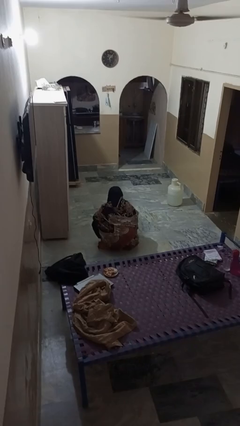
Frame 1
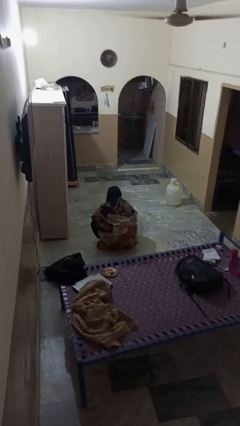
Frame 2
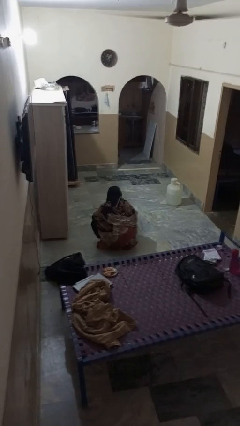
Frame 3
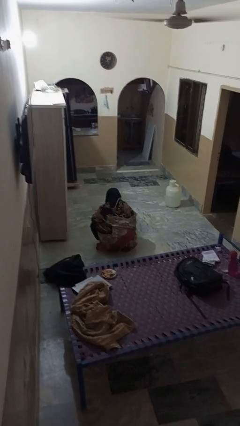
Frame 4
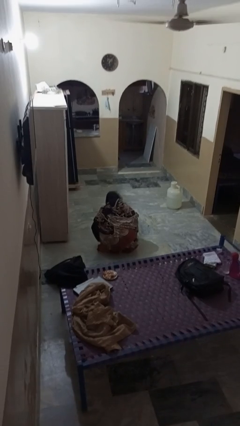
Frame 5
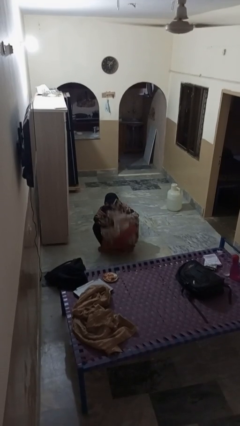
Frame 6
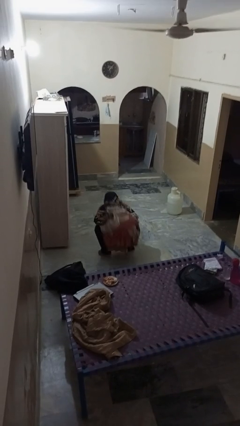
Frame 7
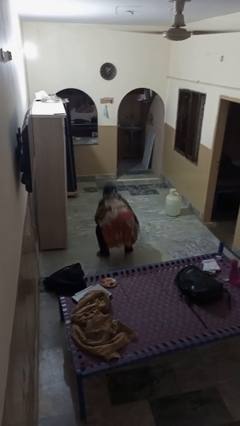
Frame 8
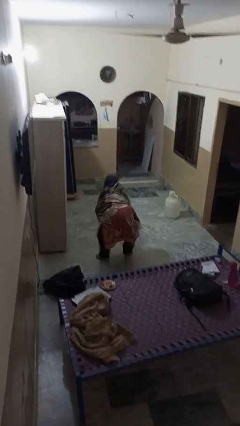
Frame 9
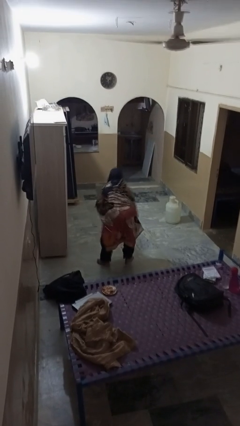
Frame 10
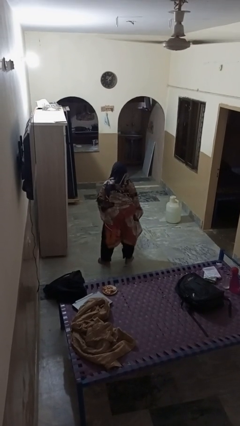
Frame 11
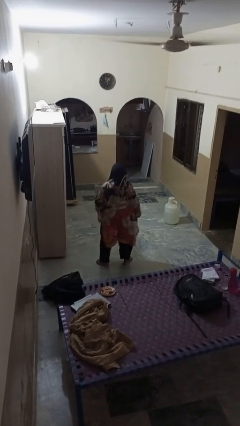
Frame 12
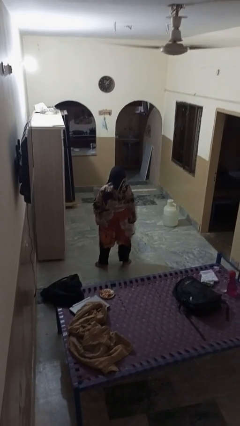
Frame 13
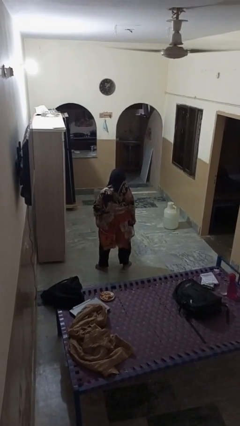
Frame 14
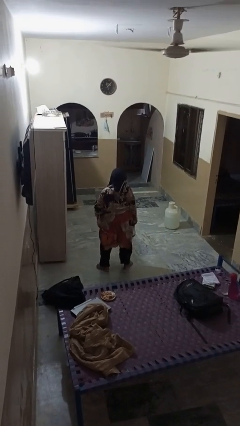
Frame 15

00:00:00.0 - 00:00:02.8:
person stands up

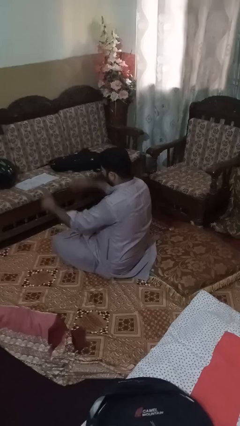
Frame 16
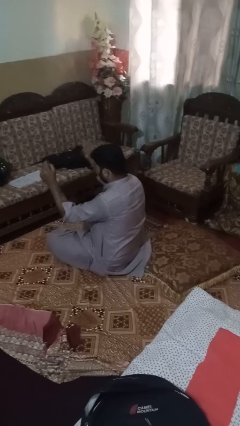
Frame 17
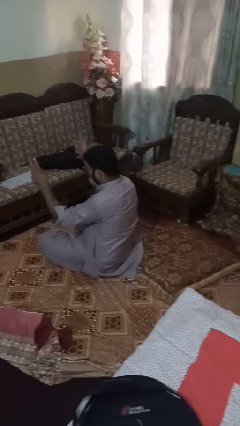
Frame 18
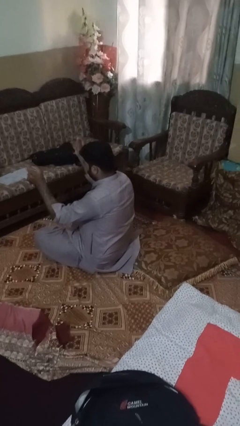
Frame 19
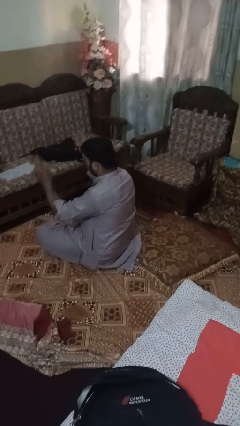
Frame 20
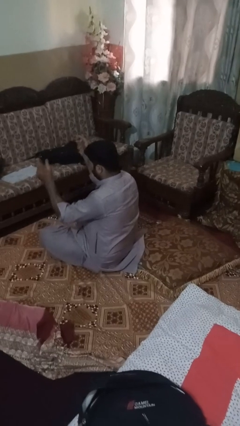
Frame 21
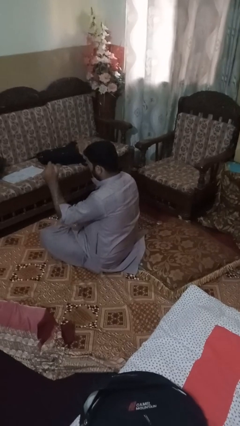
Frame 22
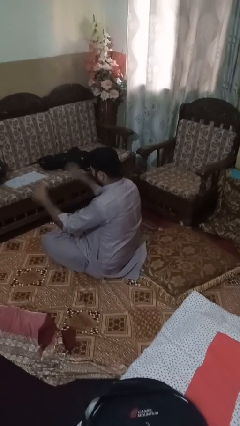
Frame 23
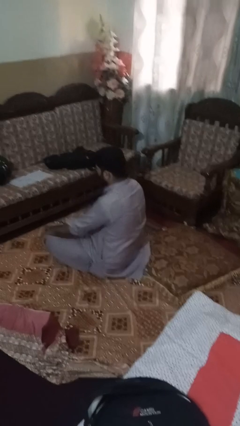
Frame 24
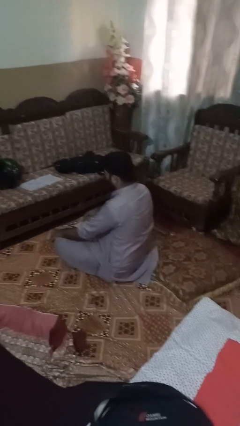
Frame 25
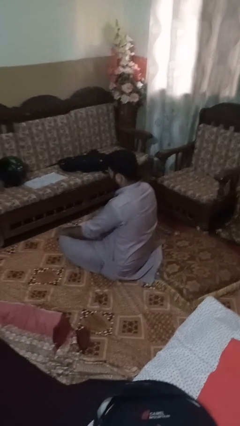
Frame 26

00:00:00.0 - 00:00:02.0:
person snaps fingers

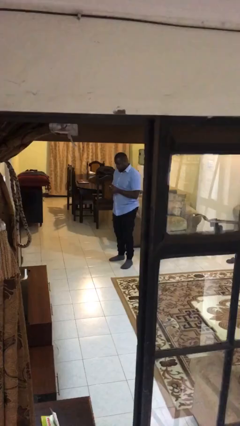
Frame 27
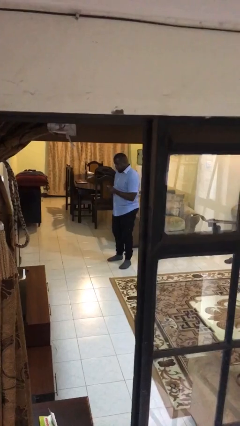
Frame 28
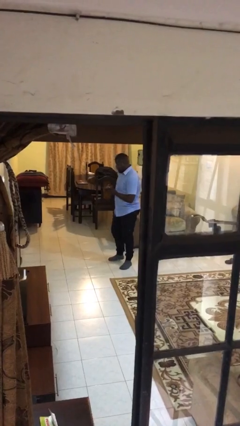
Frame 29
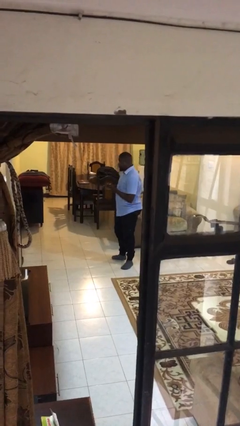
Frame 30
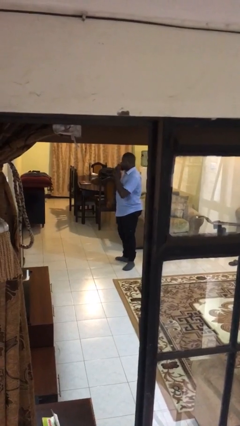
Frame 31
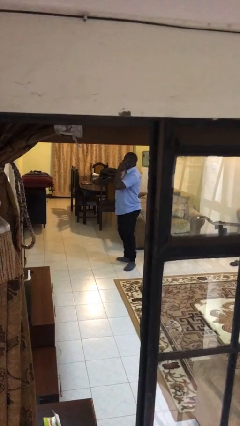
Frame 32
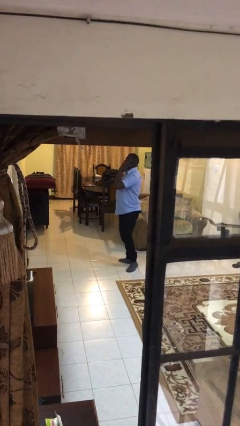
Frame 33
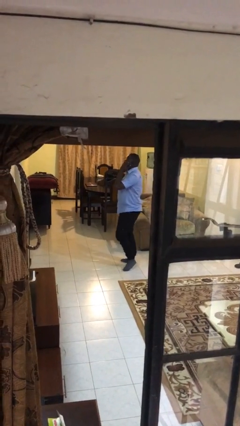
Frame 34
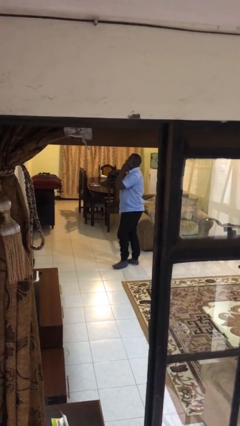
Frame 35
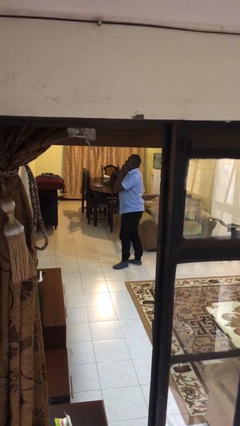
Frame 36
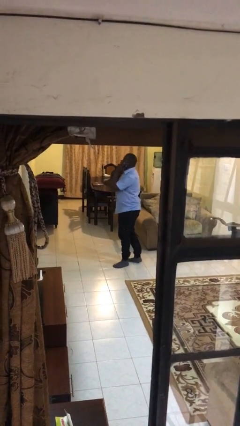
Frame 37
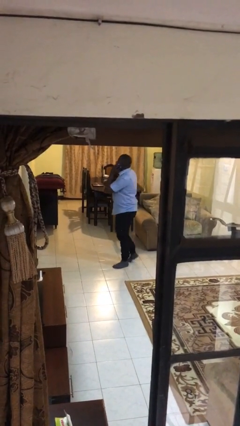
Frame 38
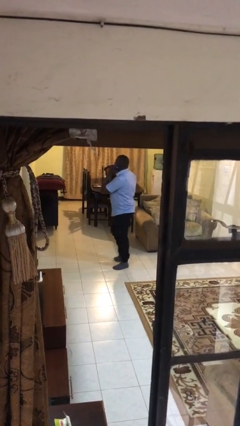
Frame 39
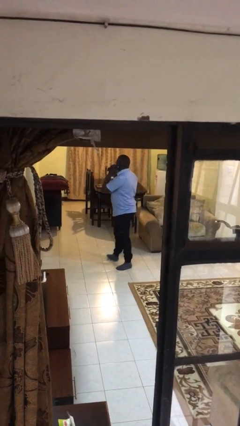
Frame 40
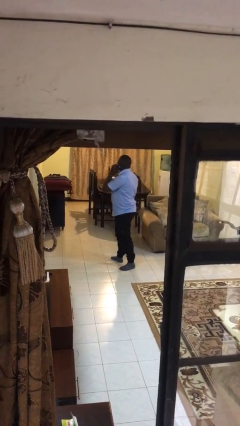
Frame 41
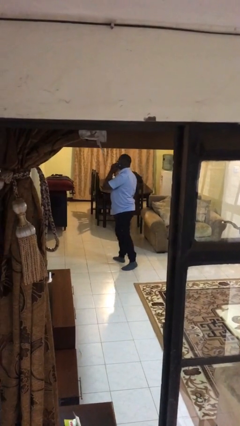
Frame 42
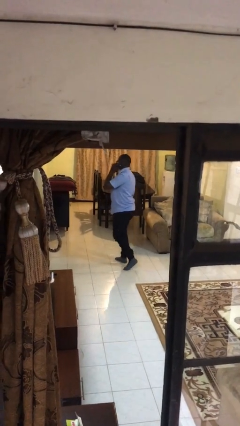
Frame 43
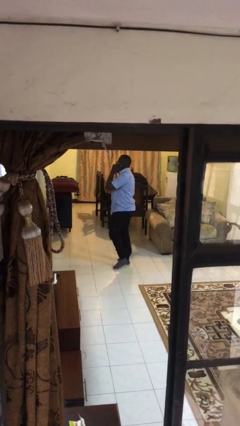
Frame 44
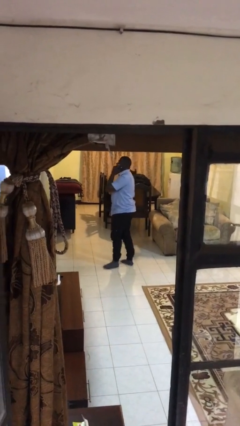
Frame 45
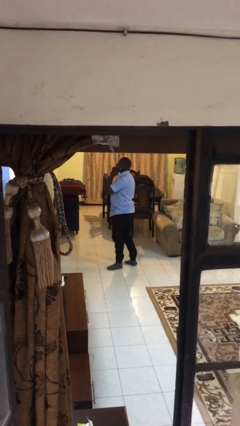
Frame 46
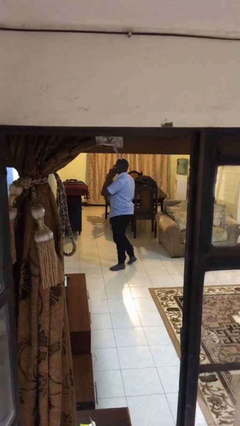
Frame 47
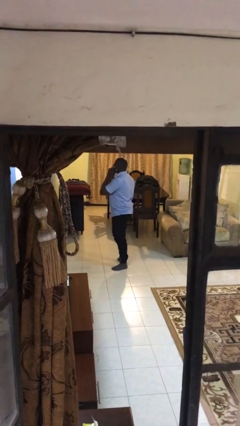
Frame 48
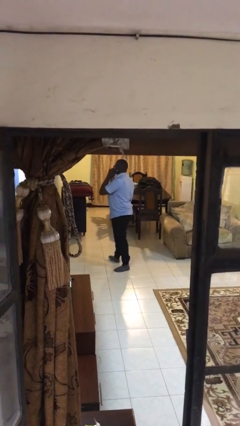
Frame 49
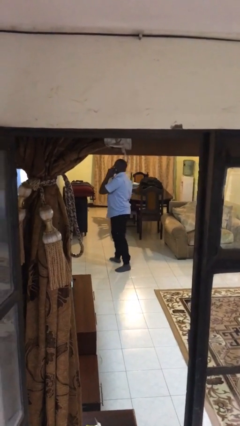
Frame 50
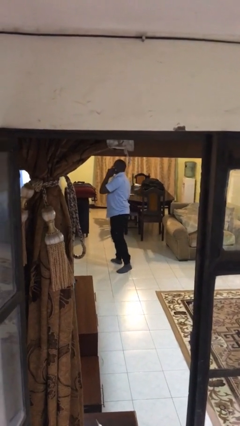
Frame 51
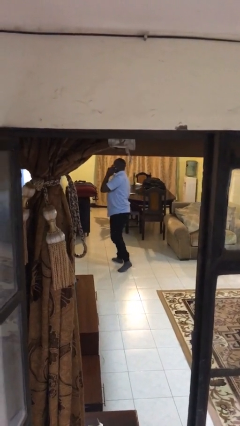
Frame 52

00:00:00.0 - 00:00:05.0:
person talks on phone

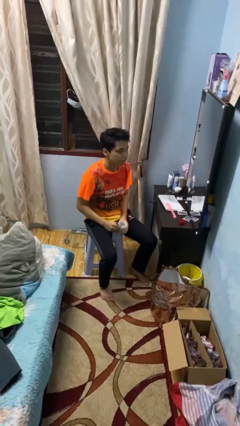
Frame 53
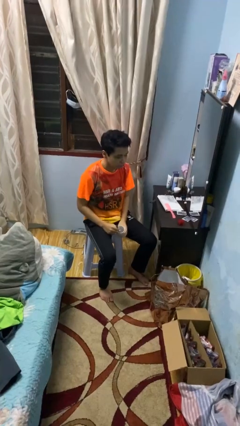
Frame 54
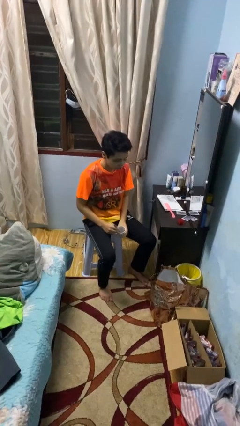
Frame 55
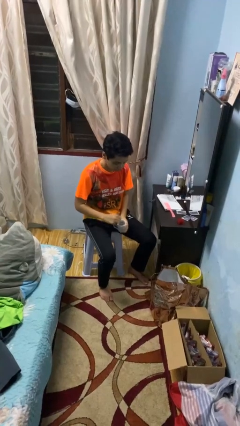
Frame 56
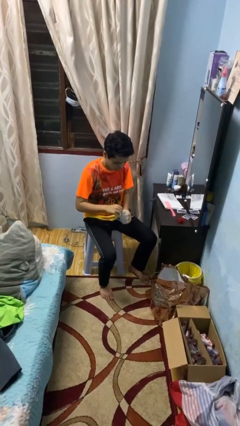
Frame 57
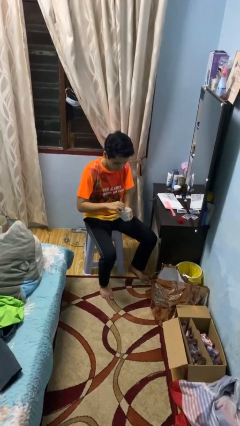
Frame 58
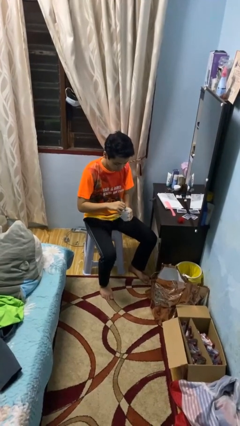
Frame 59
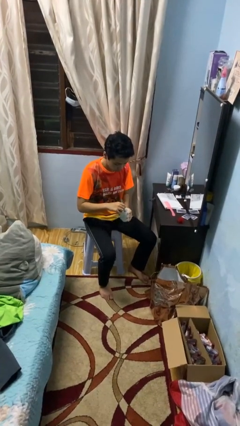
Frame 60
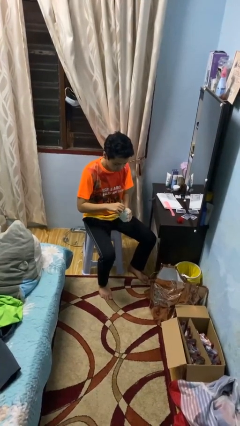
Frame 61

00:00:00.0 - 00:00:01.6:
person stirs mug

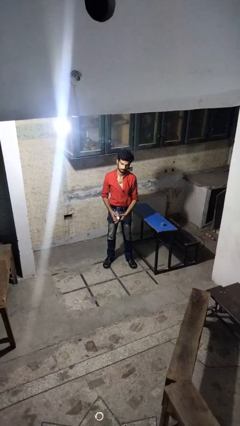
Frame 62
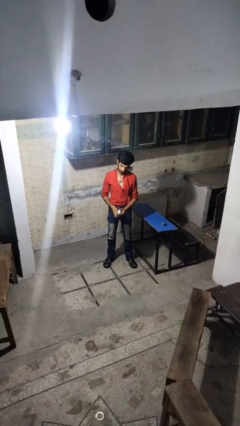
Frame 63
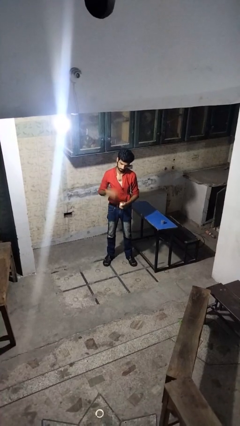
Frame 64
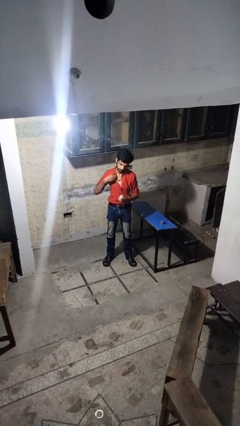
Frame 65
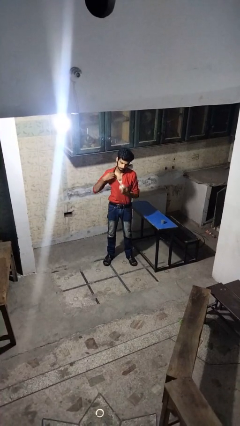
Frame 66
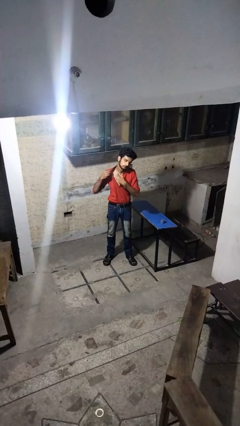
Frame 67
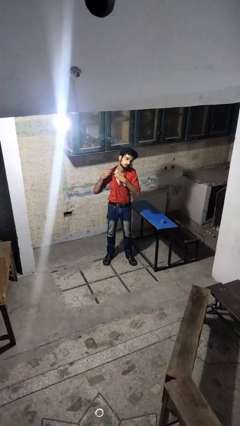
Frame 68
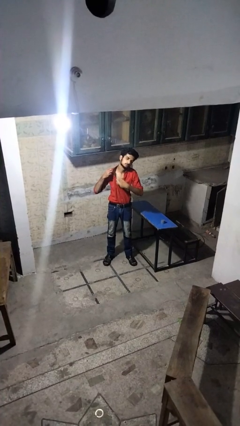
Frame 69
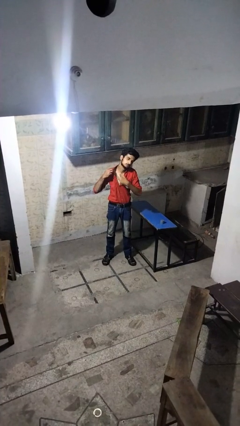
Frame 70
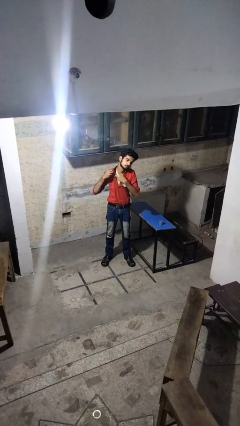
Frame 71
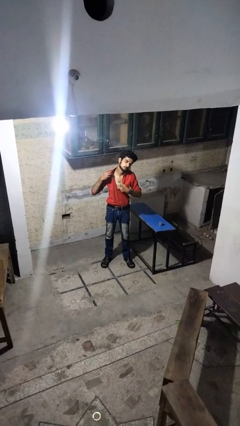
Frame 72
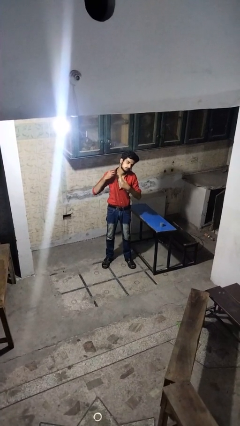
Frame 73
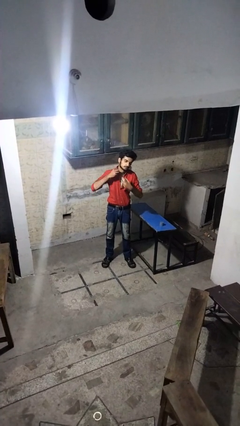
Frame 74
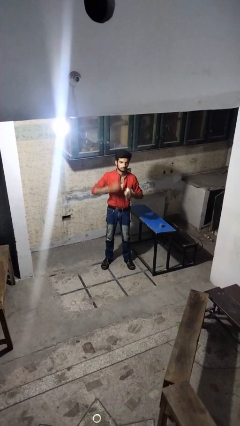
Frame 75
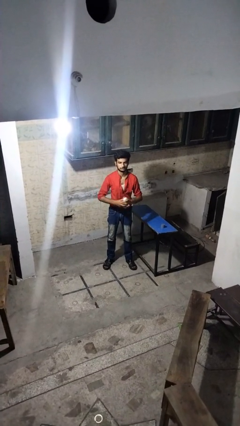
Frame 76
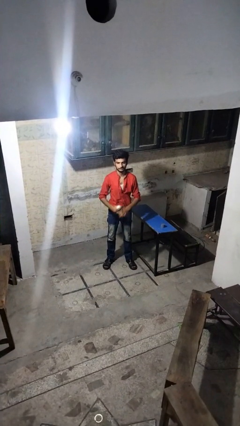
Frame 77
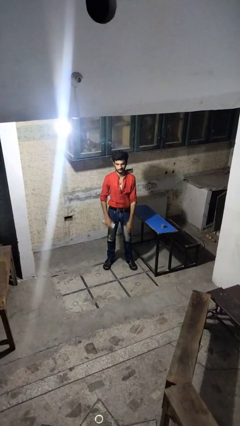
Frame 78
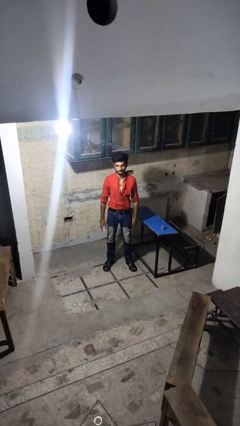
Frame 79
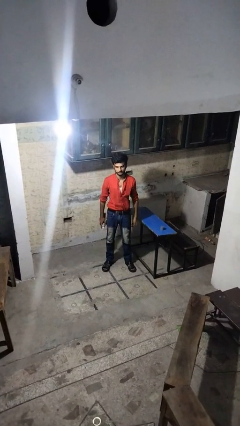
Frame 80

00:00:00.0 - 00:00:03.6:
person applies deodorant

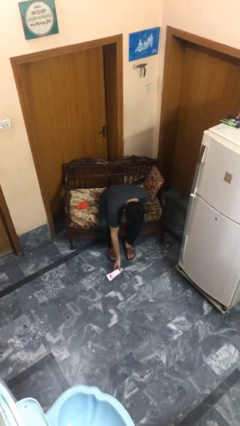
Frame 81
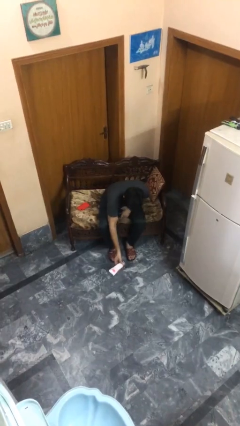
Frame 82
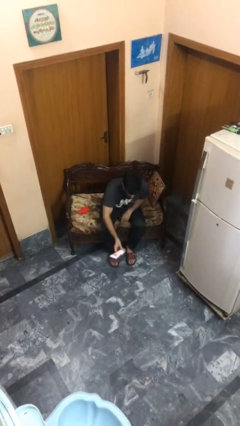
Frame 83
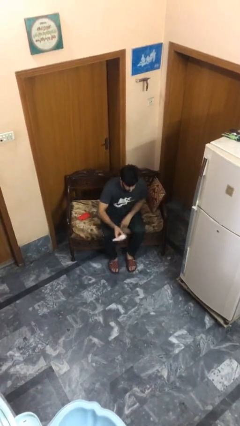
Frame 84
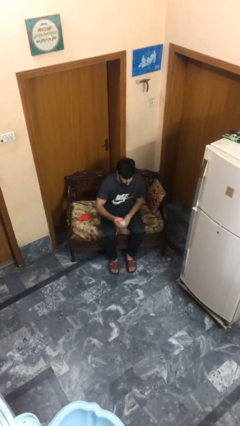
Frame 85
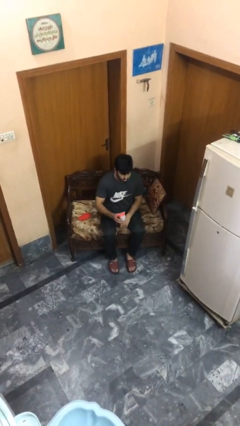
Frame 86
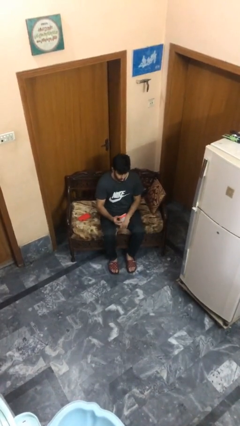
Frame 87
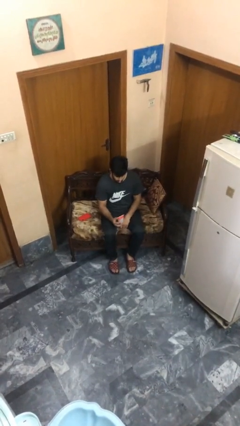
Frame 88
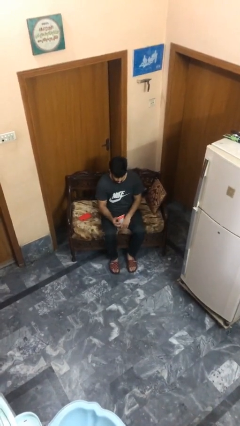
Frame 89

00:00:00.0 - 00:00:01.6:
person picks up object from floor

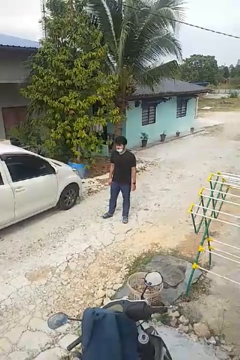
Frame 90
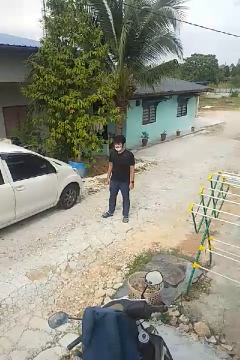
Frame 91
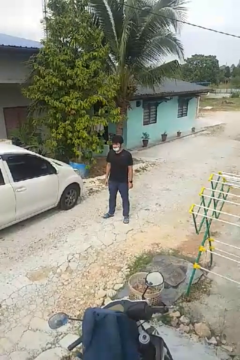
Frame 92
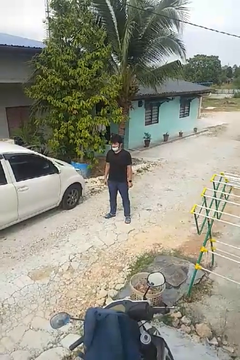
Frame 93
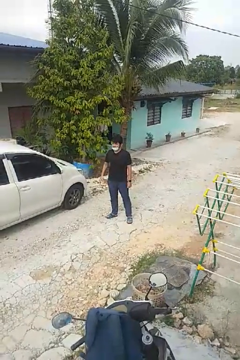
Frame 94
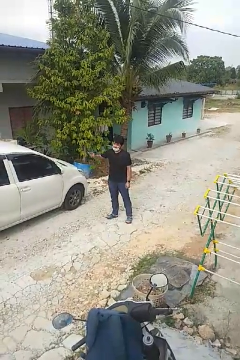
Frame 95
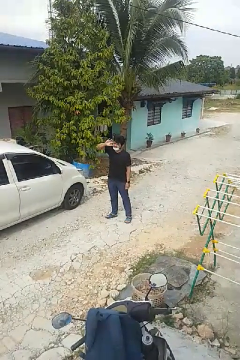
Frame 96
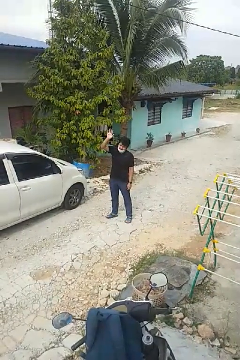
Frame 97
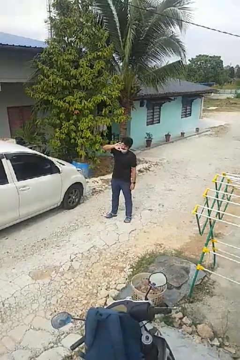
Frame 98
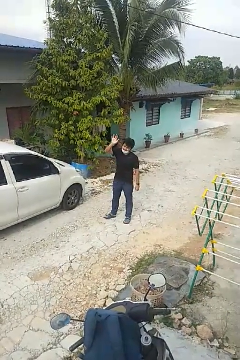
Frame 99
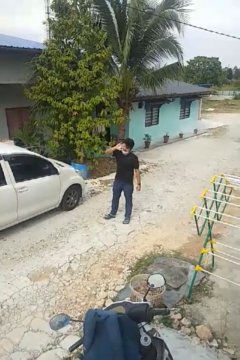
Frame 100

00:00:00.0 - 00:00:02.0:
person waves at person
